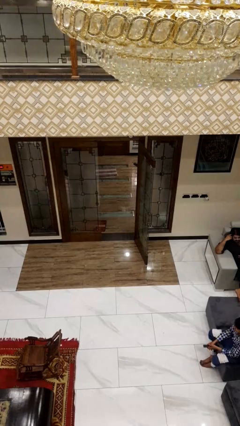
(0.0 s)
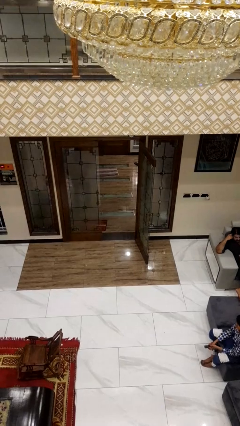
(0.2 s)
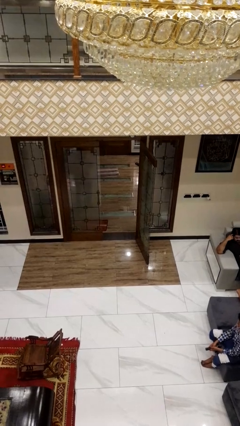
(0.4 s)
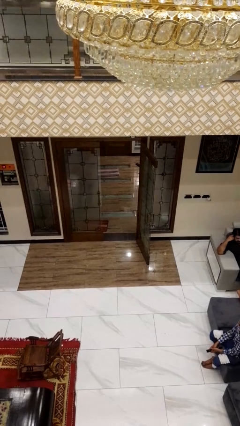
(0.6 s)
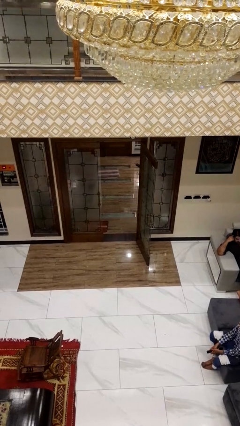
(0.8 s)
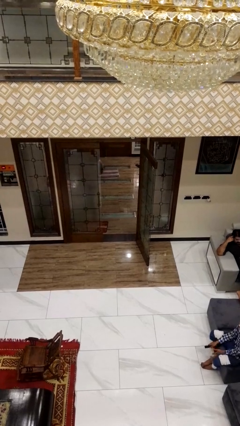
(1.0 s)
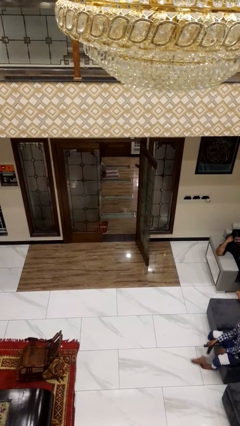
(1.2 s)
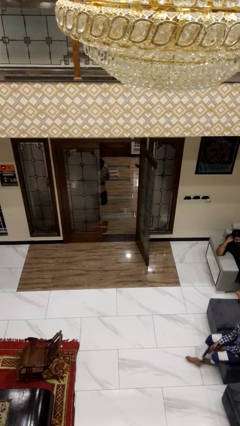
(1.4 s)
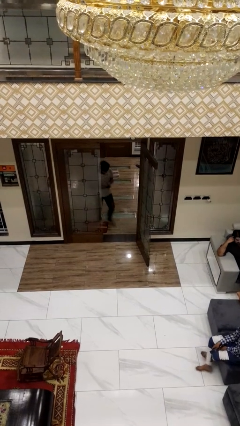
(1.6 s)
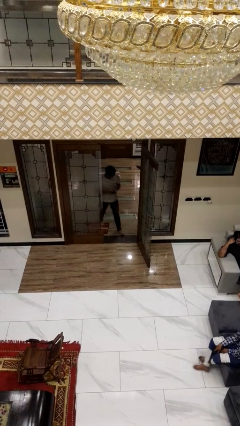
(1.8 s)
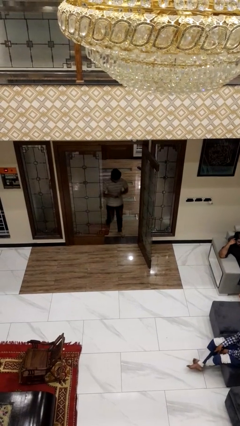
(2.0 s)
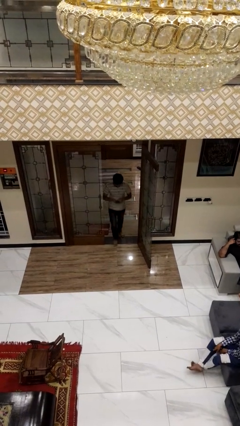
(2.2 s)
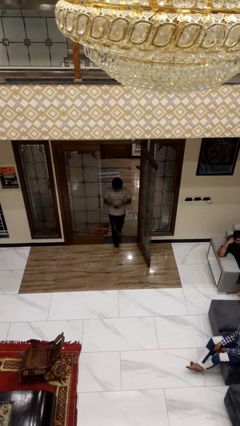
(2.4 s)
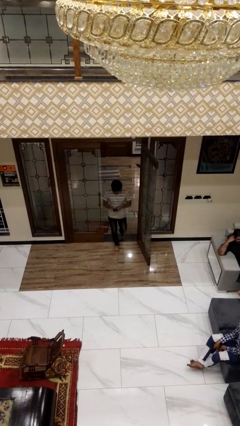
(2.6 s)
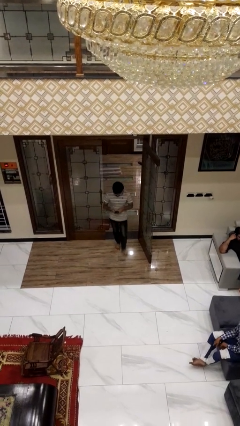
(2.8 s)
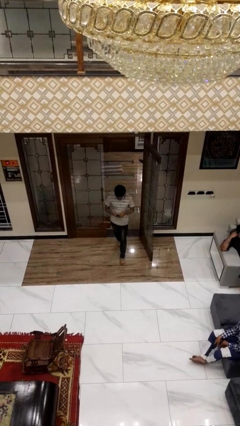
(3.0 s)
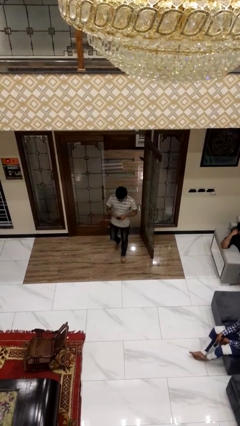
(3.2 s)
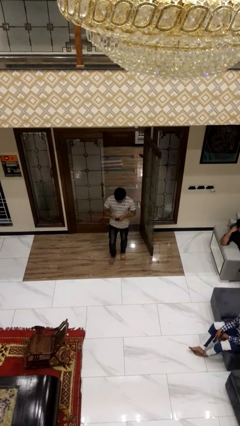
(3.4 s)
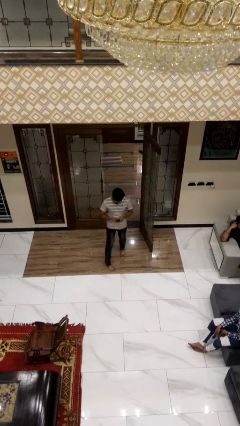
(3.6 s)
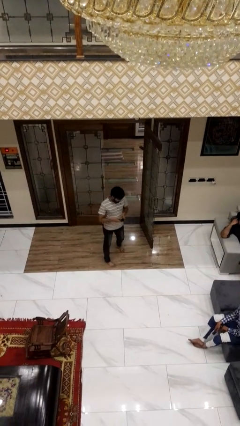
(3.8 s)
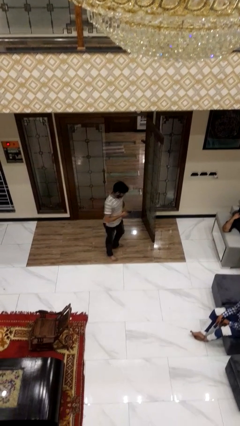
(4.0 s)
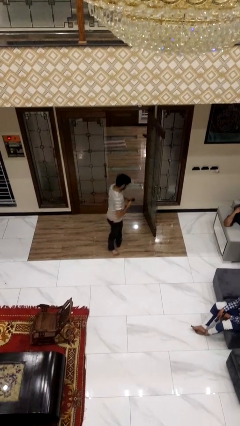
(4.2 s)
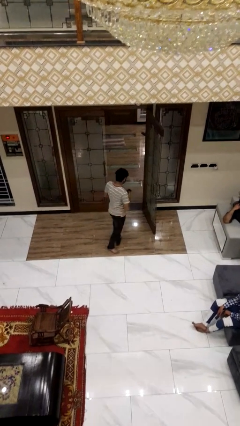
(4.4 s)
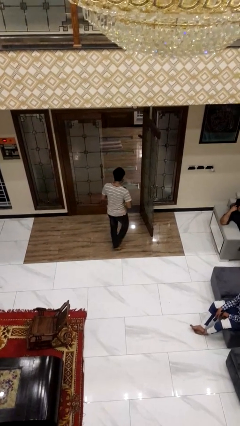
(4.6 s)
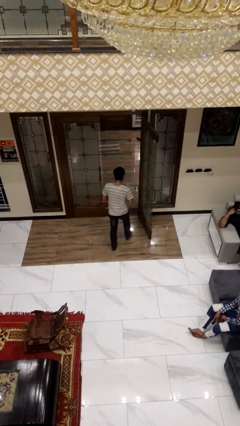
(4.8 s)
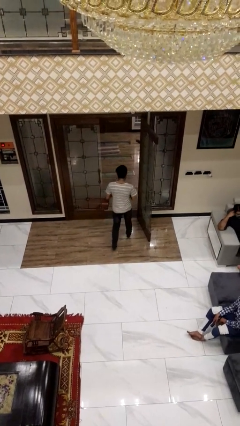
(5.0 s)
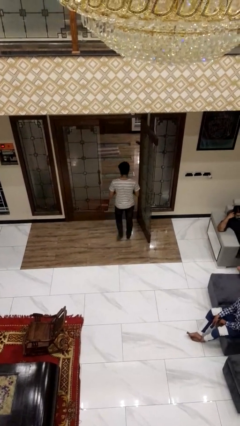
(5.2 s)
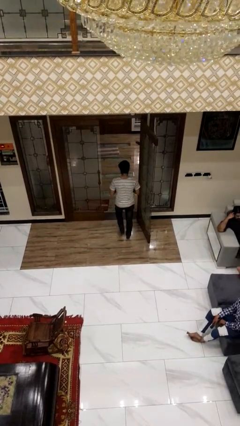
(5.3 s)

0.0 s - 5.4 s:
person enters scene through structure

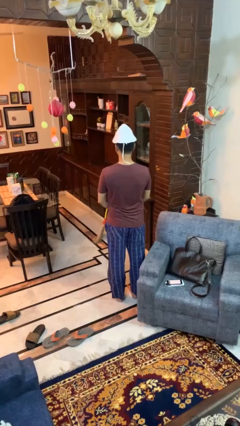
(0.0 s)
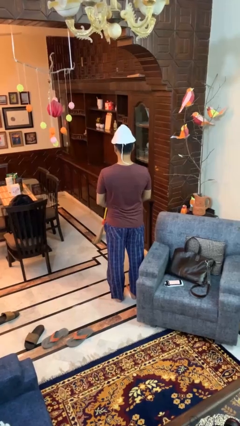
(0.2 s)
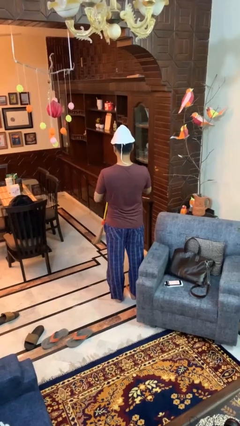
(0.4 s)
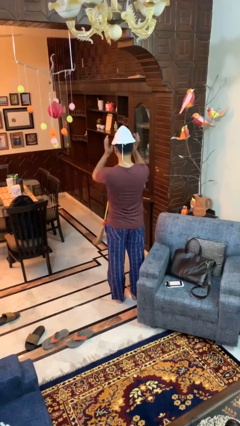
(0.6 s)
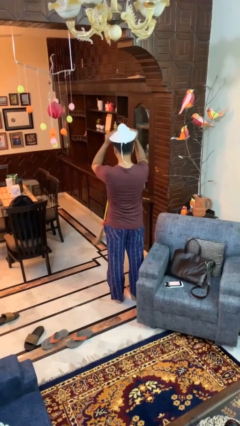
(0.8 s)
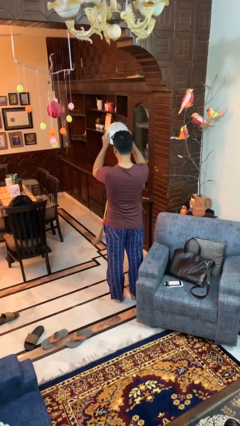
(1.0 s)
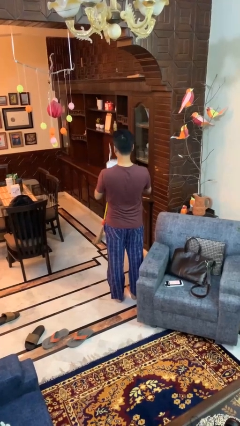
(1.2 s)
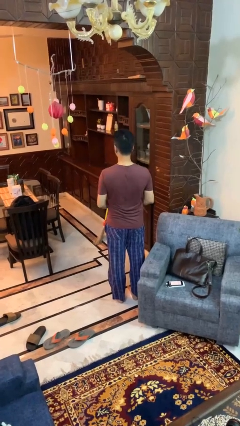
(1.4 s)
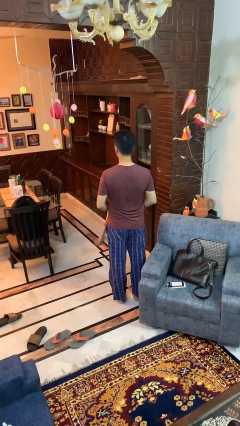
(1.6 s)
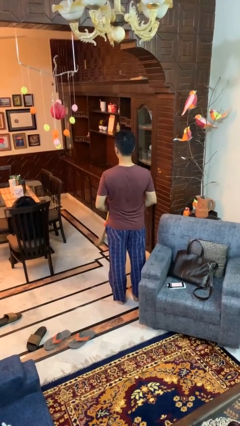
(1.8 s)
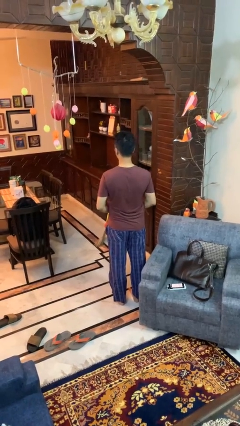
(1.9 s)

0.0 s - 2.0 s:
person takes off hat

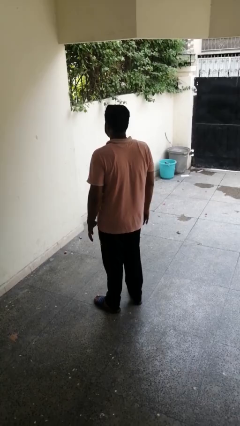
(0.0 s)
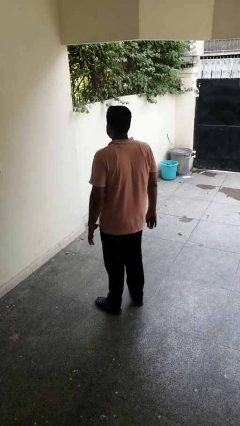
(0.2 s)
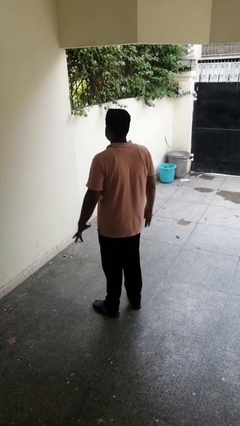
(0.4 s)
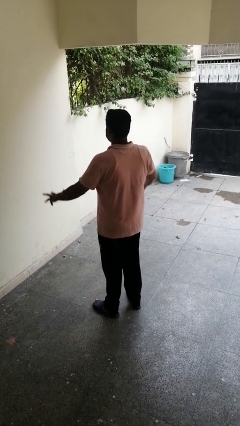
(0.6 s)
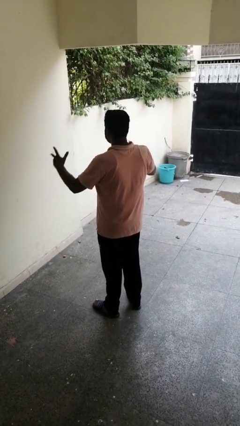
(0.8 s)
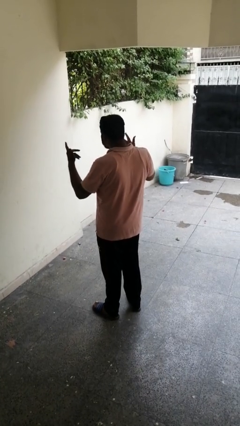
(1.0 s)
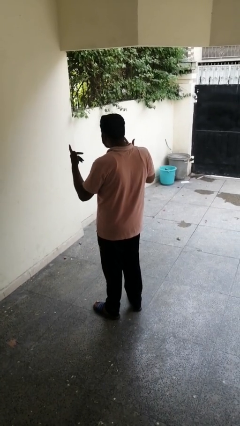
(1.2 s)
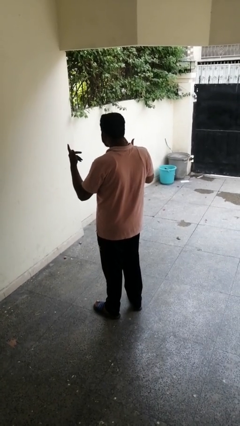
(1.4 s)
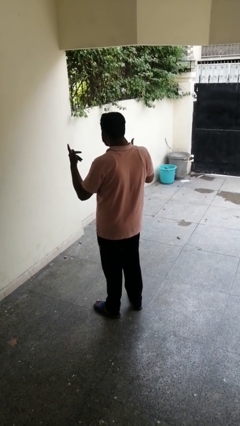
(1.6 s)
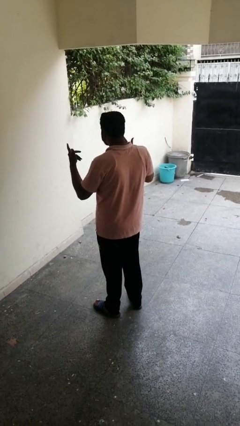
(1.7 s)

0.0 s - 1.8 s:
person shrugs

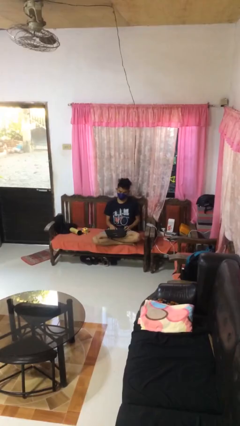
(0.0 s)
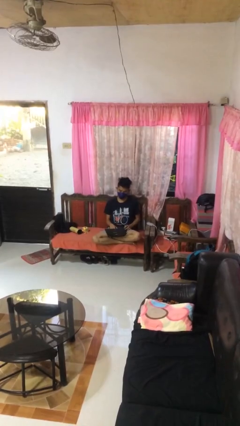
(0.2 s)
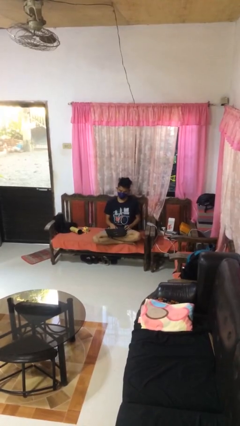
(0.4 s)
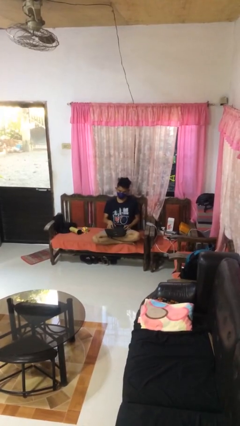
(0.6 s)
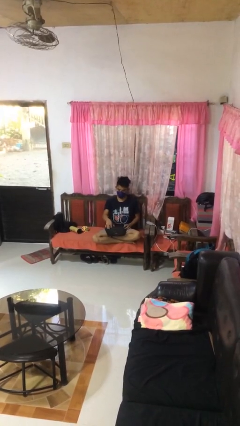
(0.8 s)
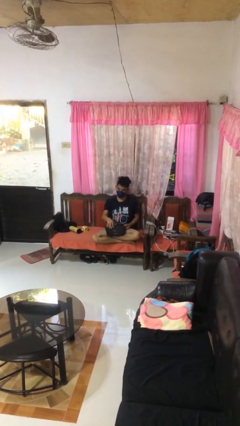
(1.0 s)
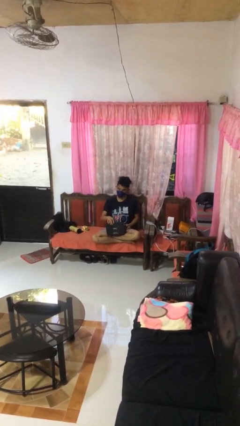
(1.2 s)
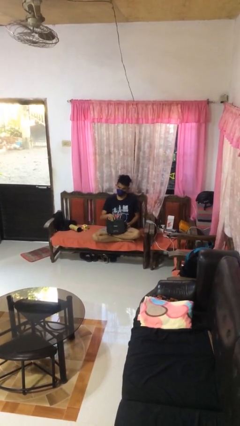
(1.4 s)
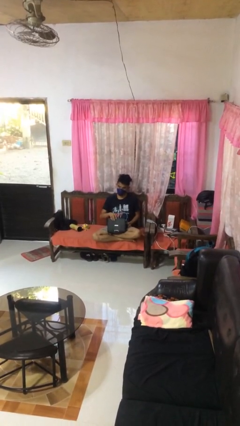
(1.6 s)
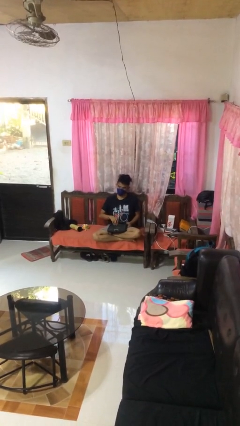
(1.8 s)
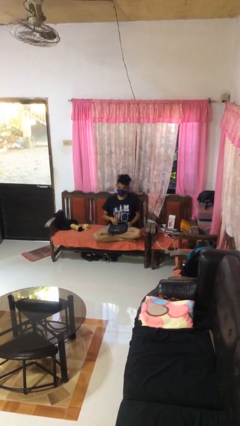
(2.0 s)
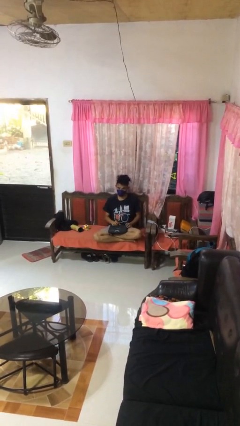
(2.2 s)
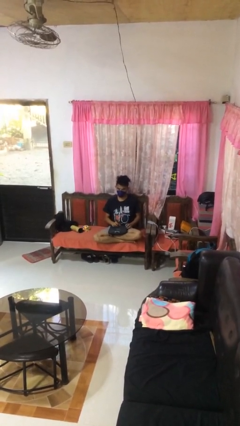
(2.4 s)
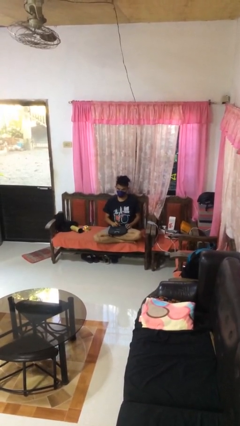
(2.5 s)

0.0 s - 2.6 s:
person closes laptop

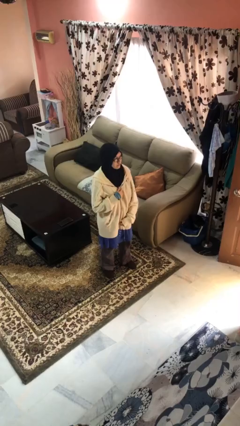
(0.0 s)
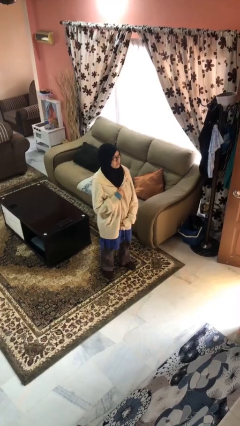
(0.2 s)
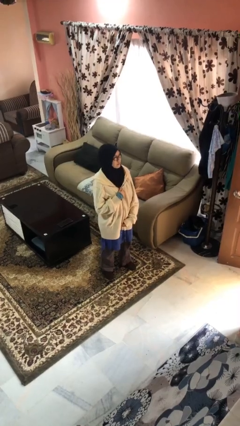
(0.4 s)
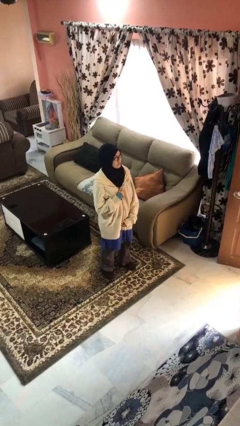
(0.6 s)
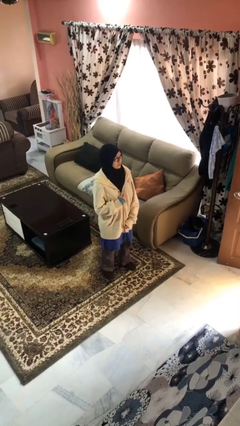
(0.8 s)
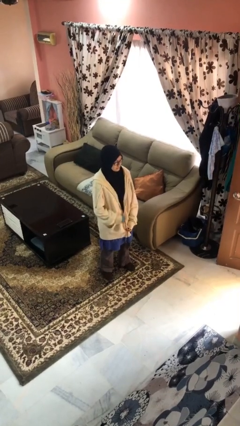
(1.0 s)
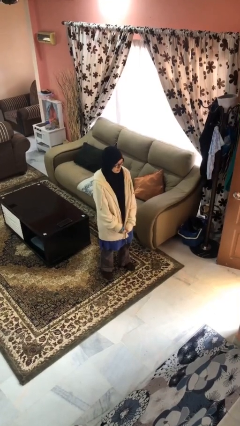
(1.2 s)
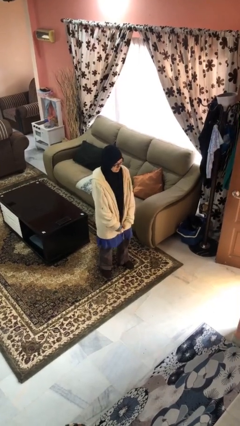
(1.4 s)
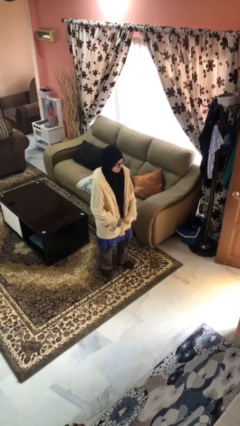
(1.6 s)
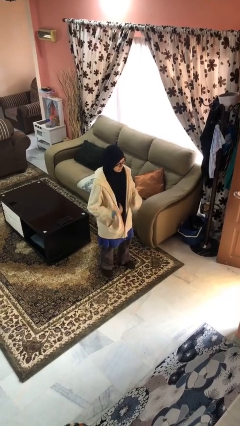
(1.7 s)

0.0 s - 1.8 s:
person unzips jacket

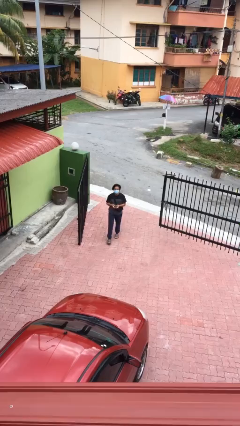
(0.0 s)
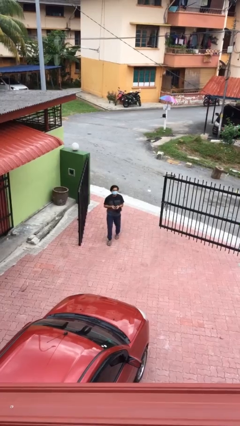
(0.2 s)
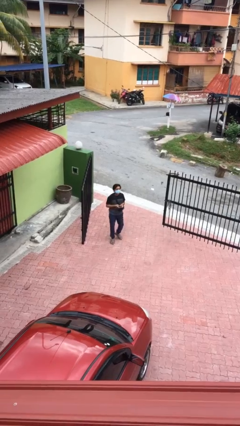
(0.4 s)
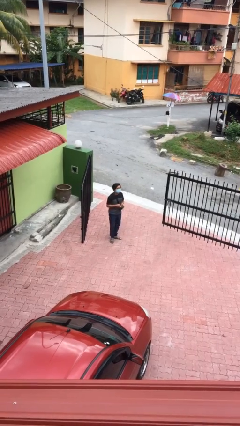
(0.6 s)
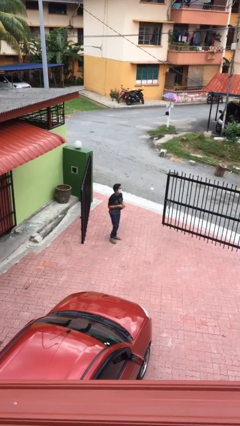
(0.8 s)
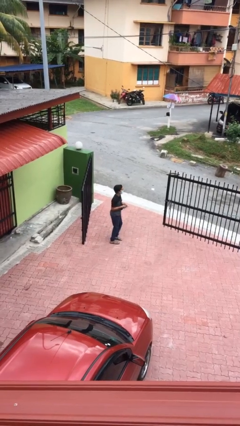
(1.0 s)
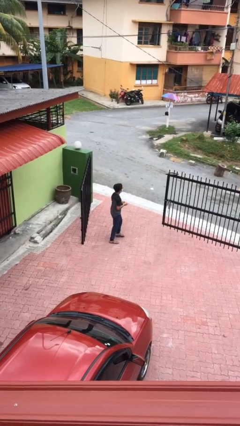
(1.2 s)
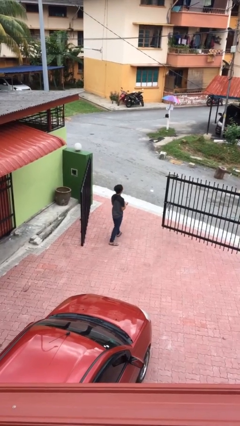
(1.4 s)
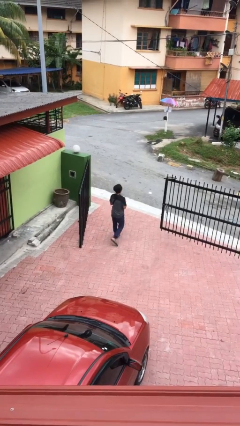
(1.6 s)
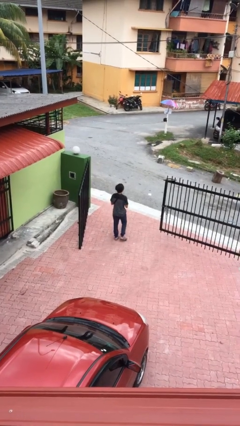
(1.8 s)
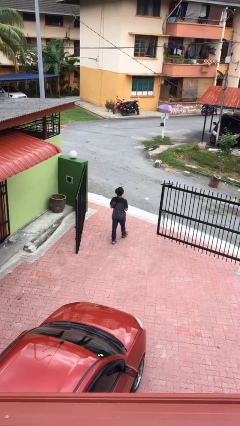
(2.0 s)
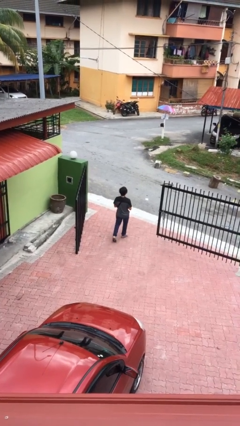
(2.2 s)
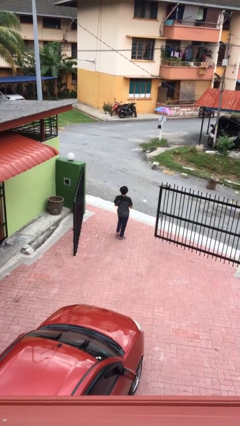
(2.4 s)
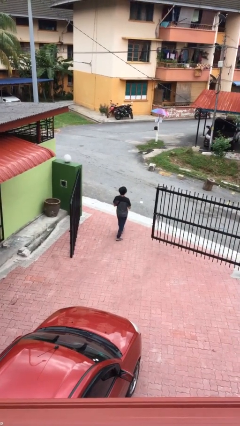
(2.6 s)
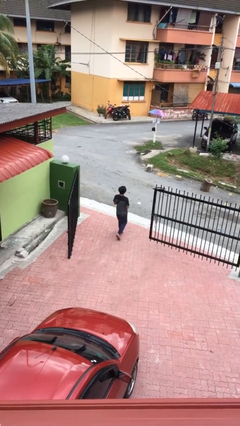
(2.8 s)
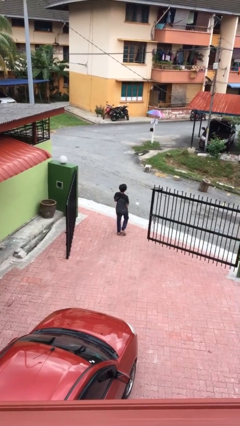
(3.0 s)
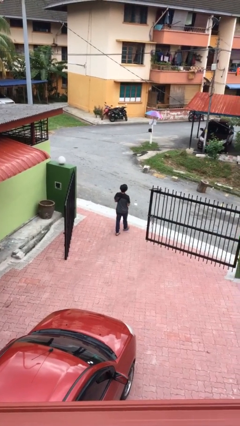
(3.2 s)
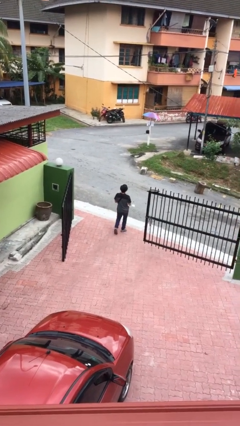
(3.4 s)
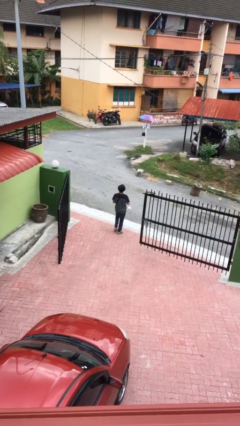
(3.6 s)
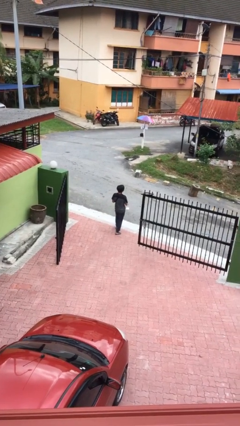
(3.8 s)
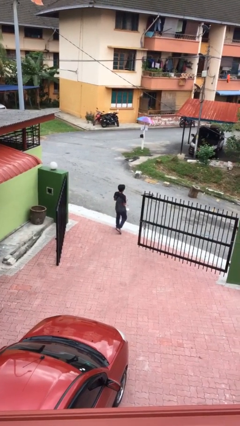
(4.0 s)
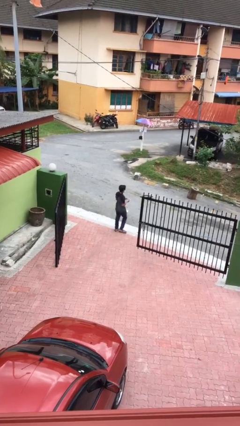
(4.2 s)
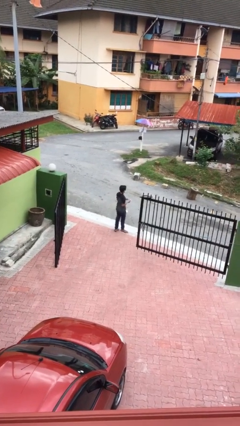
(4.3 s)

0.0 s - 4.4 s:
person exits scene through structure
